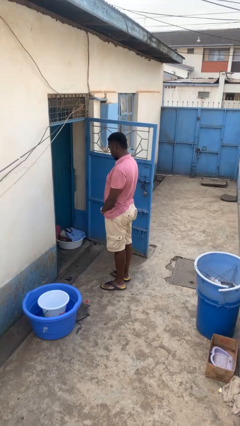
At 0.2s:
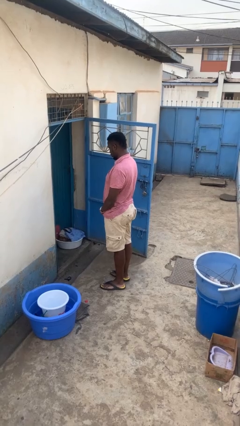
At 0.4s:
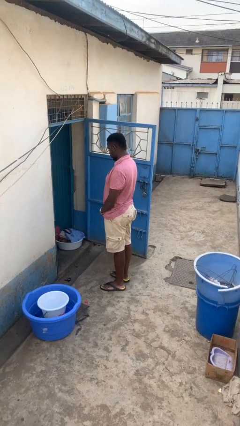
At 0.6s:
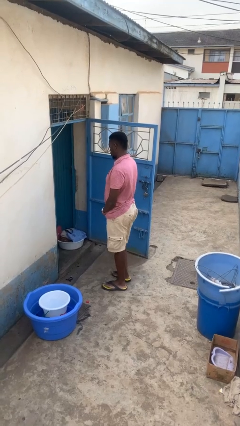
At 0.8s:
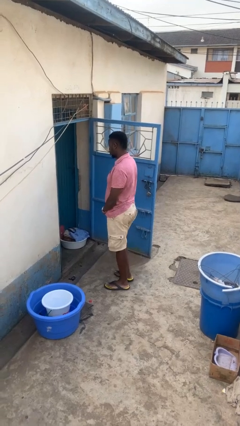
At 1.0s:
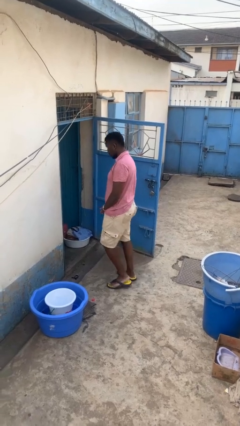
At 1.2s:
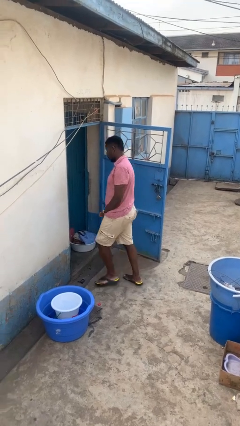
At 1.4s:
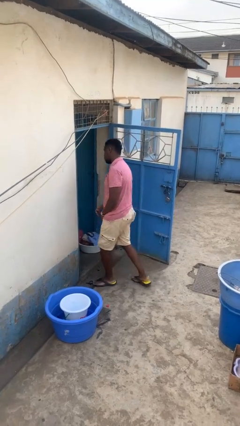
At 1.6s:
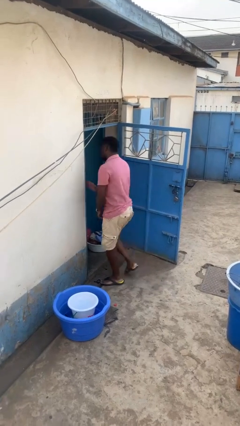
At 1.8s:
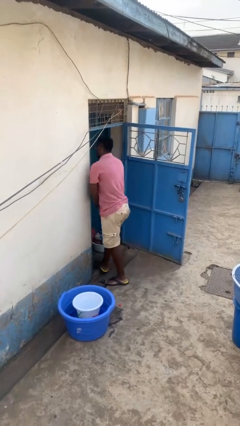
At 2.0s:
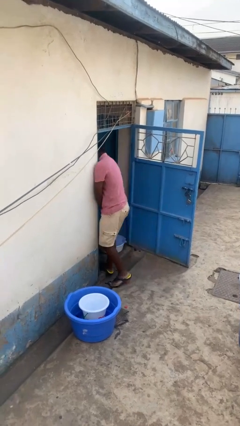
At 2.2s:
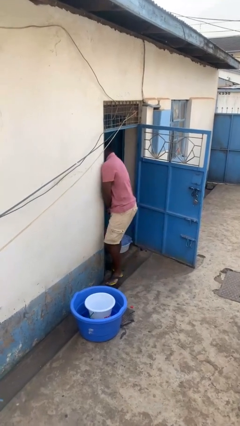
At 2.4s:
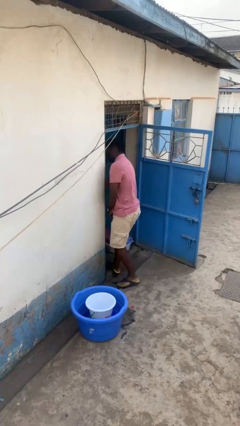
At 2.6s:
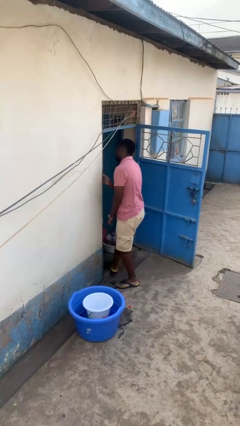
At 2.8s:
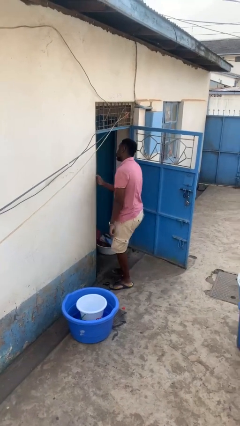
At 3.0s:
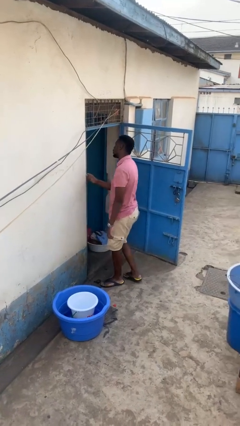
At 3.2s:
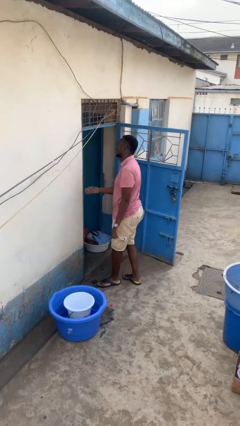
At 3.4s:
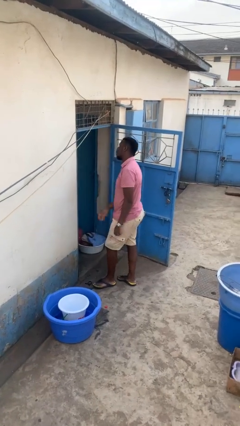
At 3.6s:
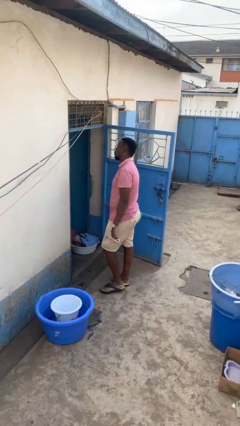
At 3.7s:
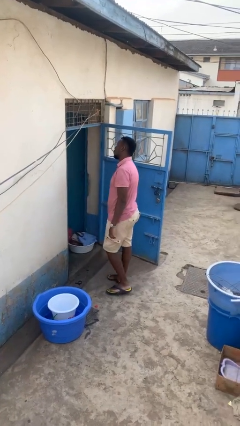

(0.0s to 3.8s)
person bumps into wall

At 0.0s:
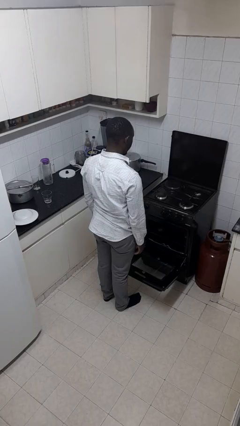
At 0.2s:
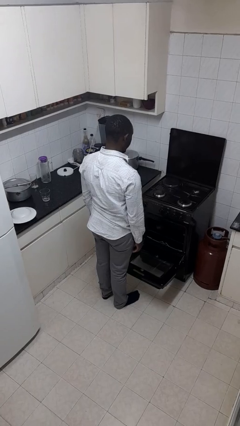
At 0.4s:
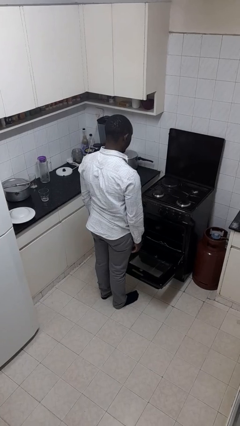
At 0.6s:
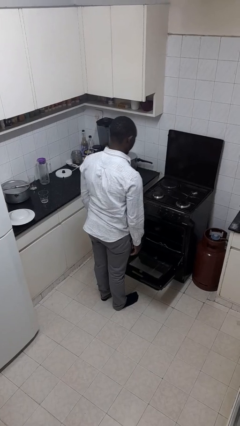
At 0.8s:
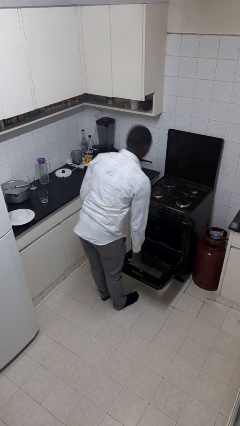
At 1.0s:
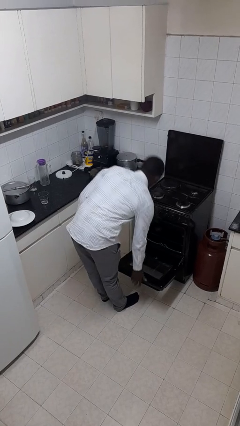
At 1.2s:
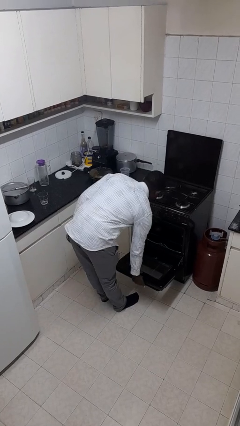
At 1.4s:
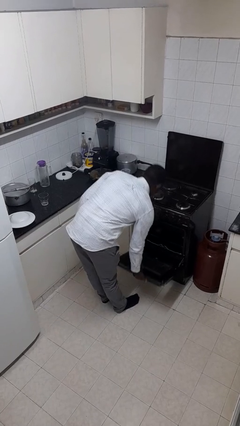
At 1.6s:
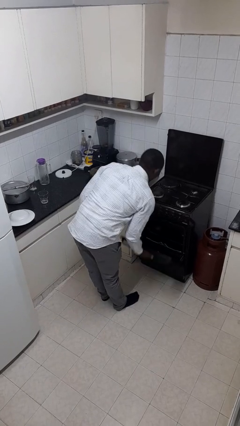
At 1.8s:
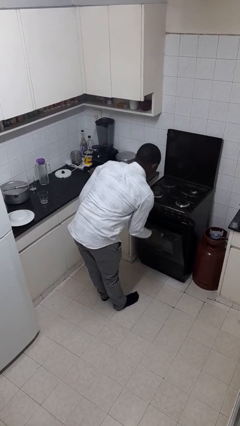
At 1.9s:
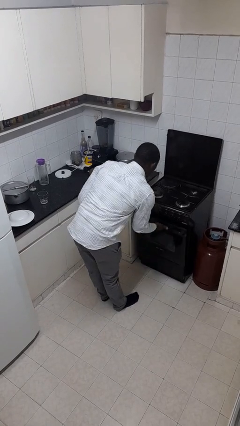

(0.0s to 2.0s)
person closes oven door

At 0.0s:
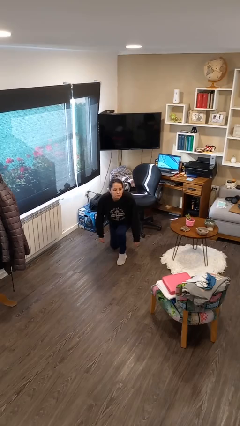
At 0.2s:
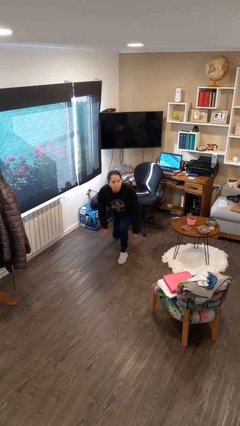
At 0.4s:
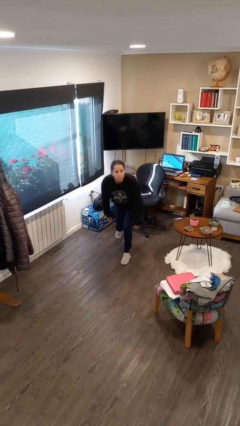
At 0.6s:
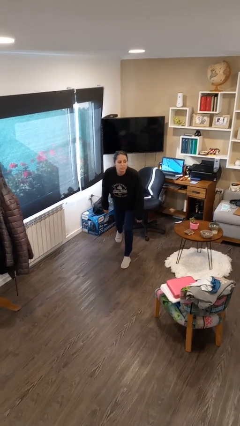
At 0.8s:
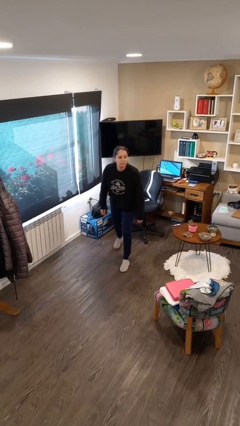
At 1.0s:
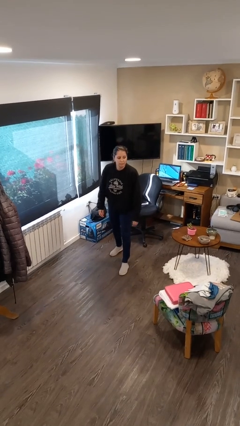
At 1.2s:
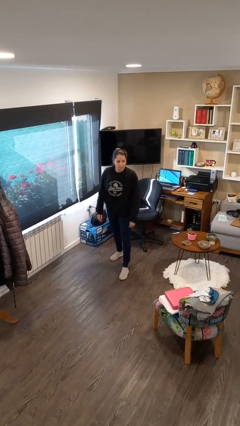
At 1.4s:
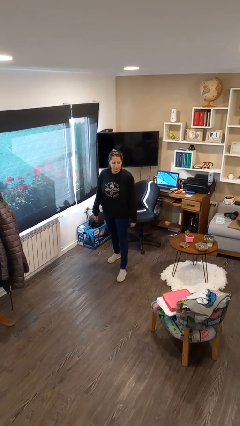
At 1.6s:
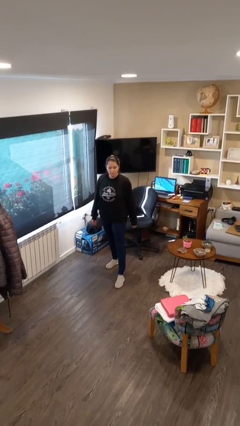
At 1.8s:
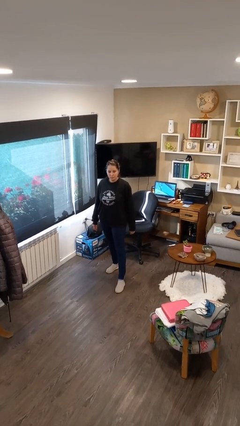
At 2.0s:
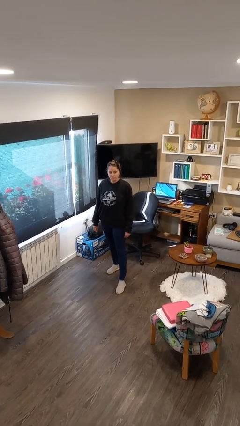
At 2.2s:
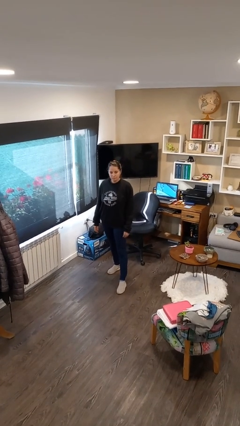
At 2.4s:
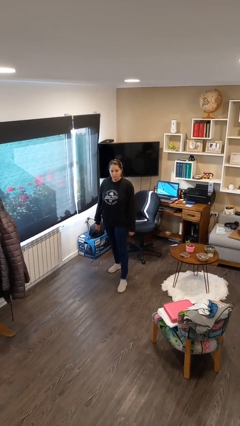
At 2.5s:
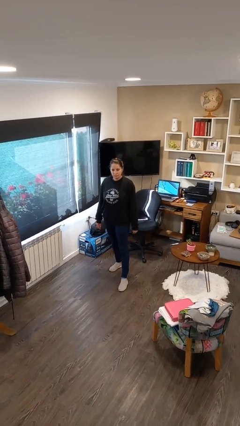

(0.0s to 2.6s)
person stands up from floor

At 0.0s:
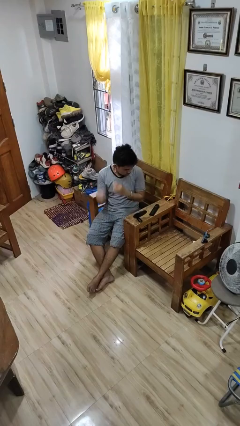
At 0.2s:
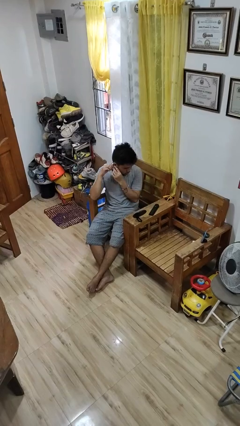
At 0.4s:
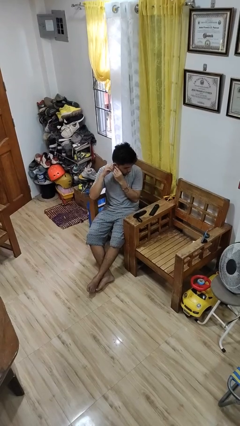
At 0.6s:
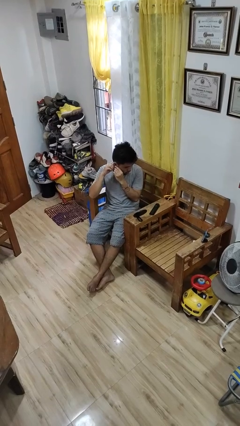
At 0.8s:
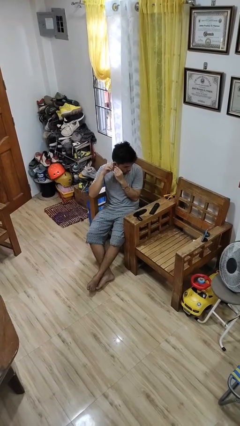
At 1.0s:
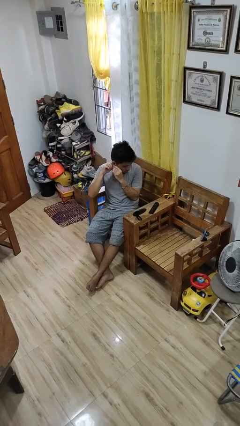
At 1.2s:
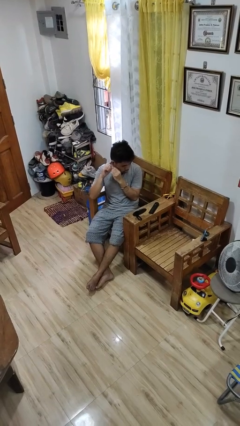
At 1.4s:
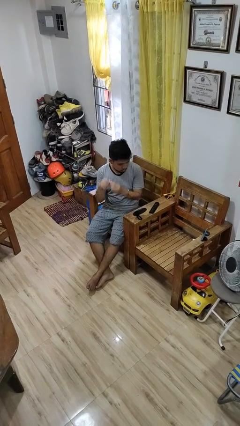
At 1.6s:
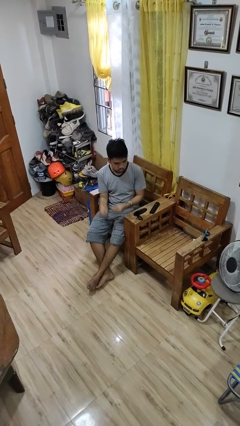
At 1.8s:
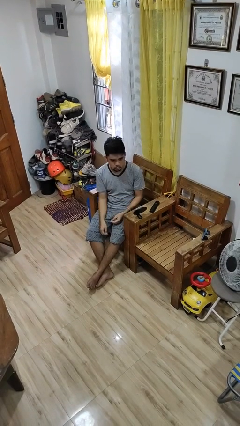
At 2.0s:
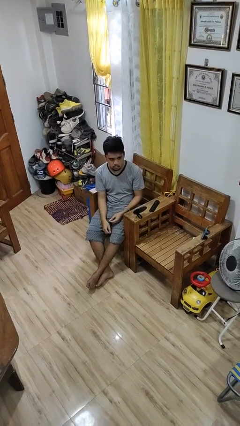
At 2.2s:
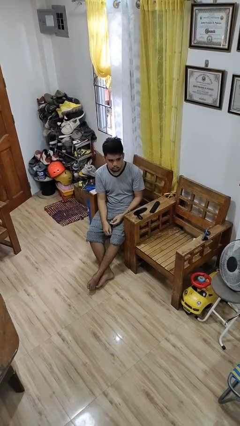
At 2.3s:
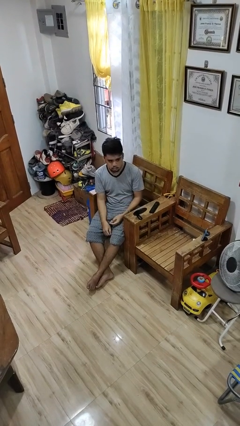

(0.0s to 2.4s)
person takes off earrings

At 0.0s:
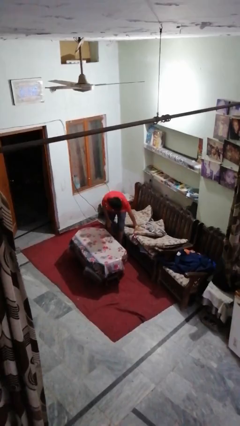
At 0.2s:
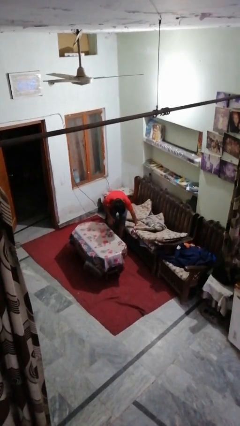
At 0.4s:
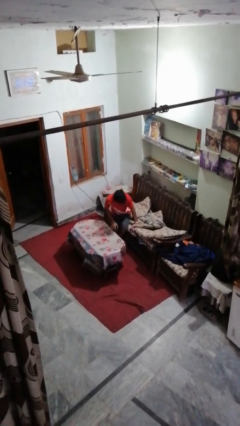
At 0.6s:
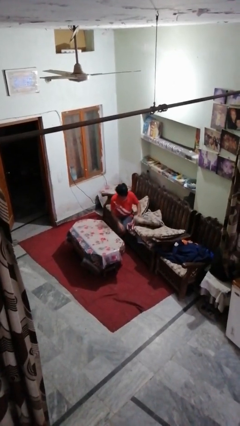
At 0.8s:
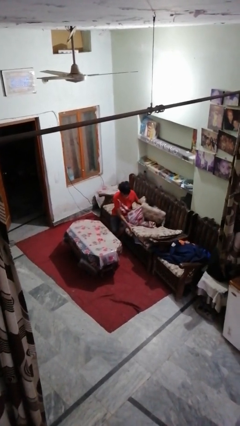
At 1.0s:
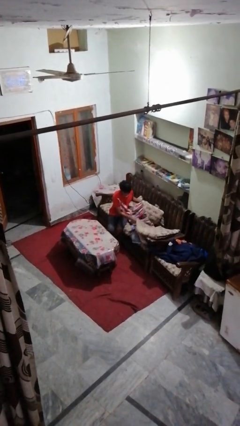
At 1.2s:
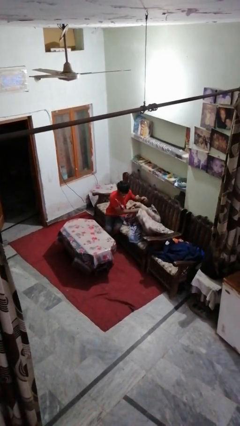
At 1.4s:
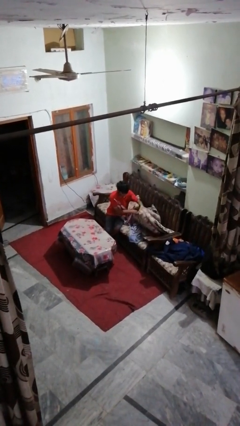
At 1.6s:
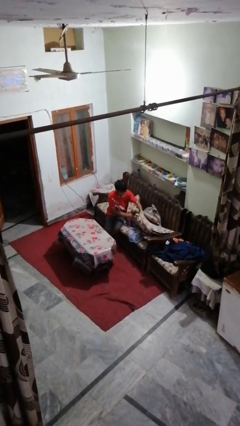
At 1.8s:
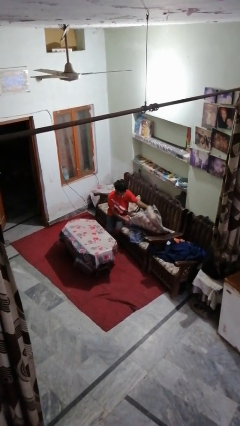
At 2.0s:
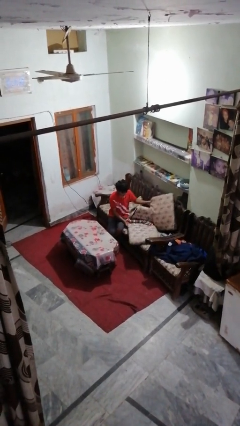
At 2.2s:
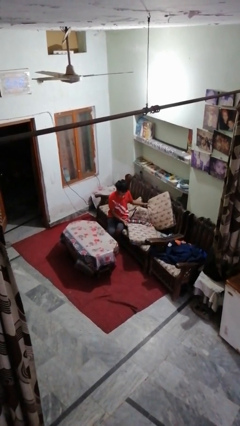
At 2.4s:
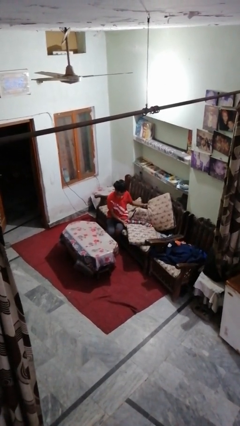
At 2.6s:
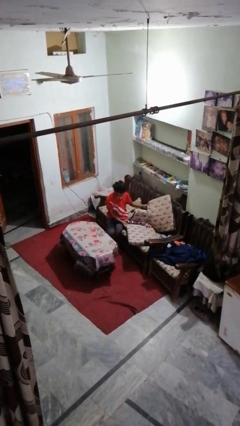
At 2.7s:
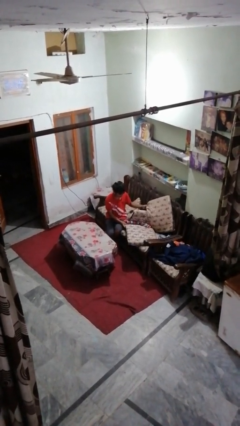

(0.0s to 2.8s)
person searches in couch

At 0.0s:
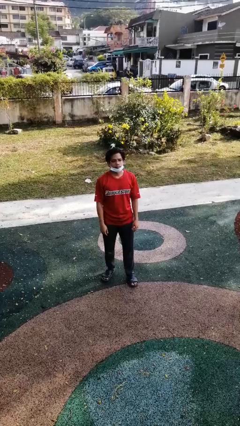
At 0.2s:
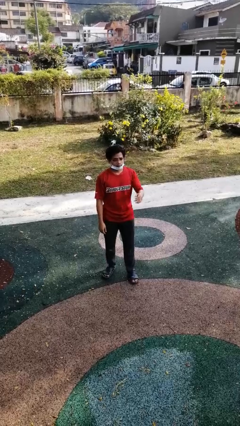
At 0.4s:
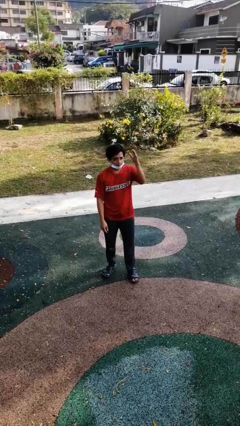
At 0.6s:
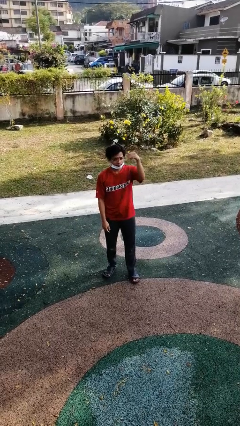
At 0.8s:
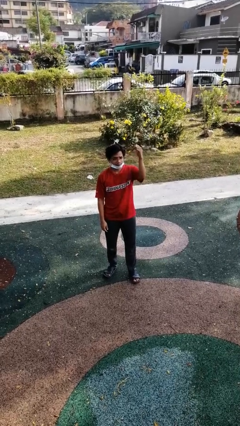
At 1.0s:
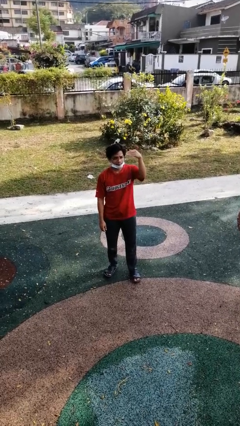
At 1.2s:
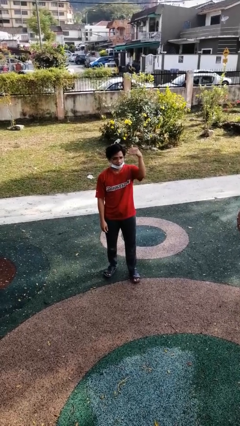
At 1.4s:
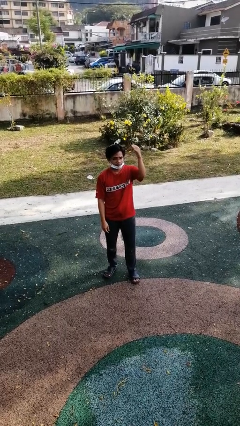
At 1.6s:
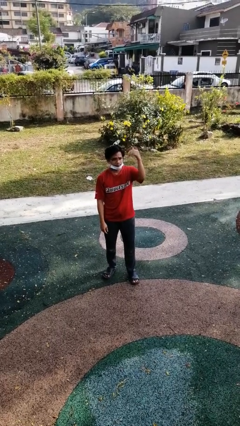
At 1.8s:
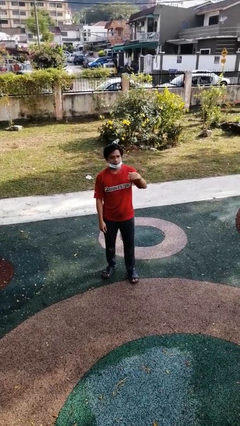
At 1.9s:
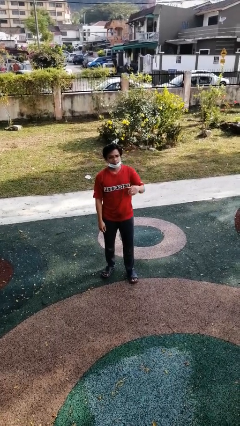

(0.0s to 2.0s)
person gestures come here

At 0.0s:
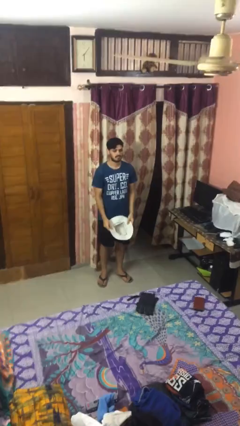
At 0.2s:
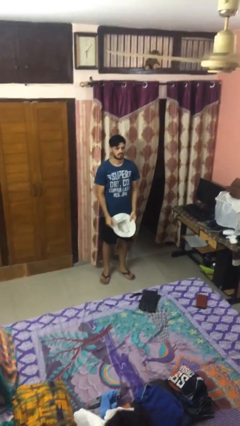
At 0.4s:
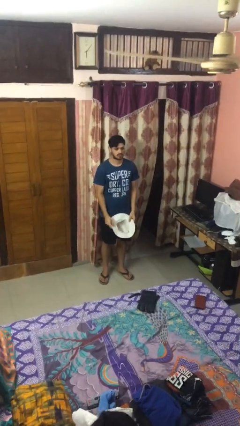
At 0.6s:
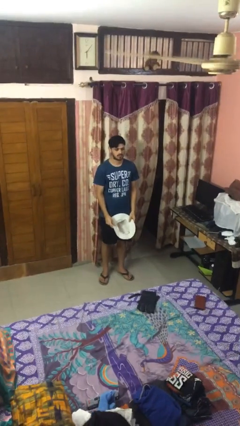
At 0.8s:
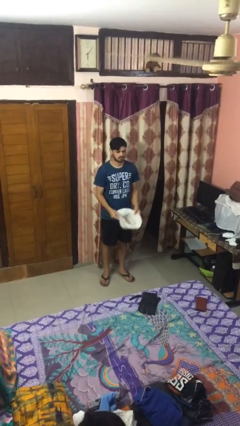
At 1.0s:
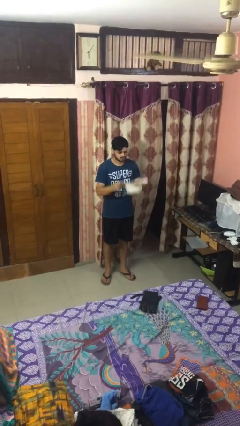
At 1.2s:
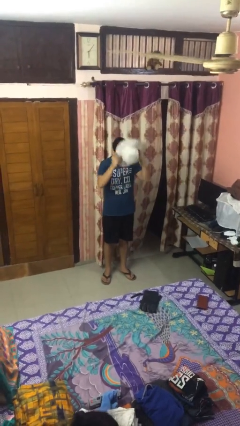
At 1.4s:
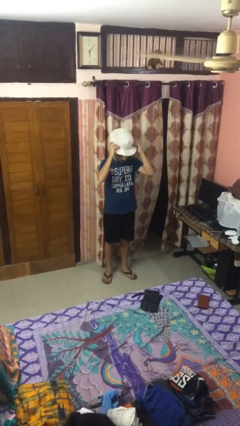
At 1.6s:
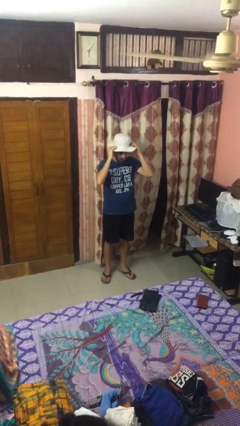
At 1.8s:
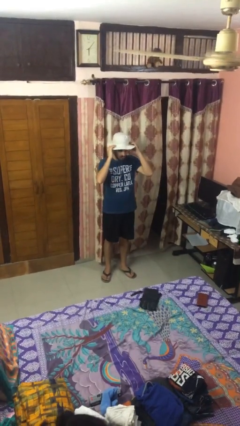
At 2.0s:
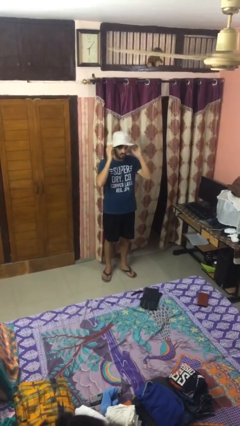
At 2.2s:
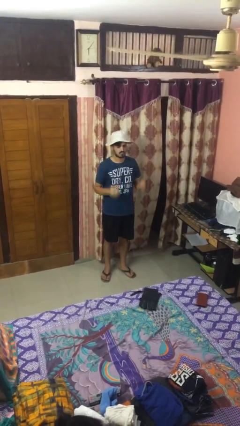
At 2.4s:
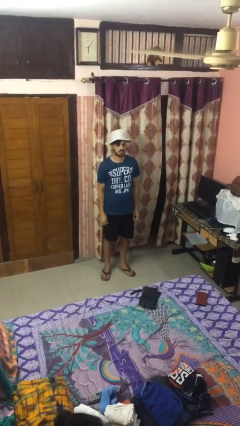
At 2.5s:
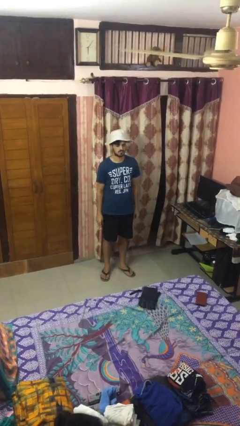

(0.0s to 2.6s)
person puts on hat
